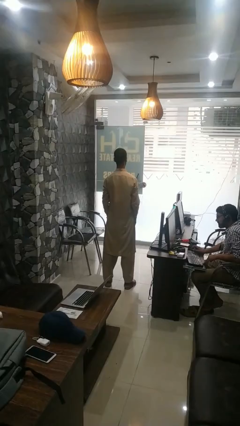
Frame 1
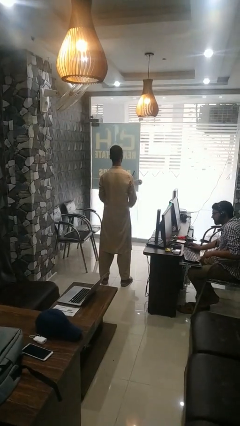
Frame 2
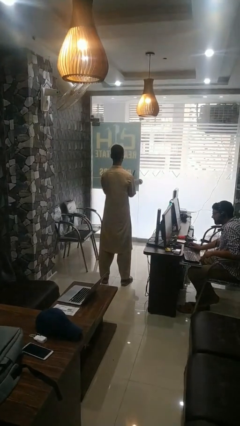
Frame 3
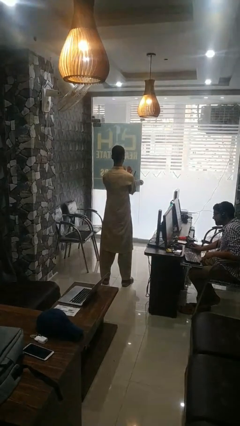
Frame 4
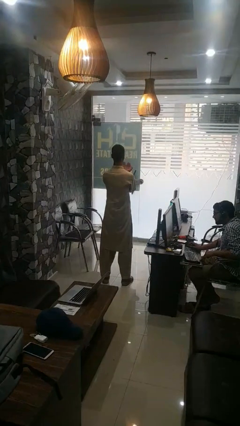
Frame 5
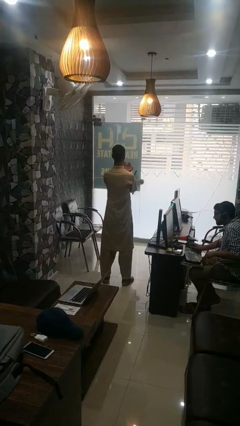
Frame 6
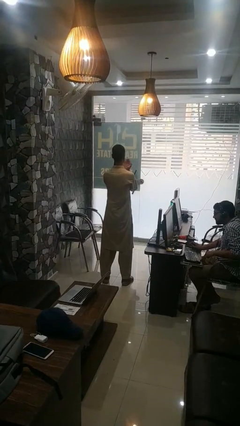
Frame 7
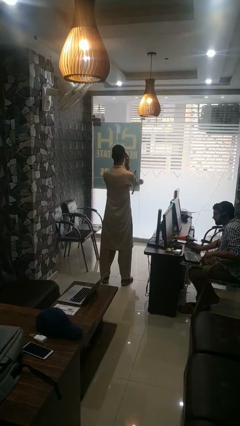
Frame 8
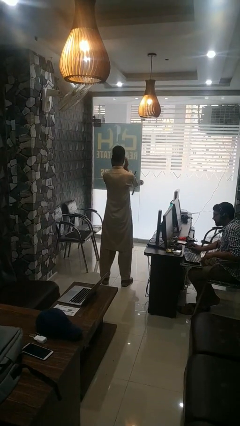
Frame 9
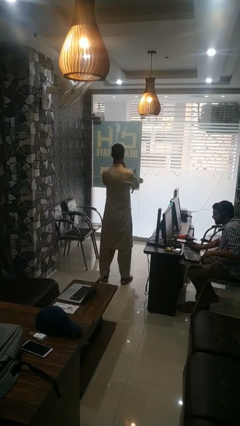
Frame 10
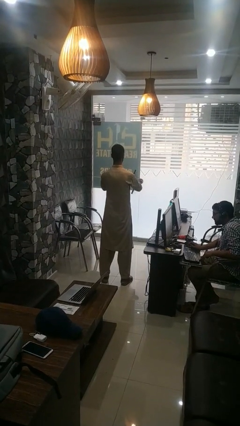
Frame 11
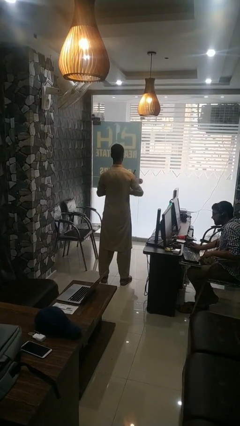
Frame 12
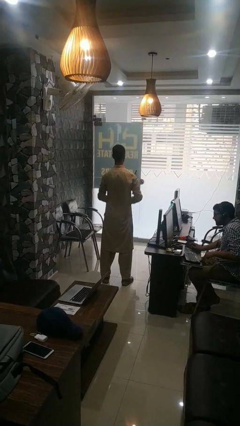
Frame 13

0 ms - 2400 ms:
person prays

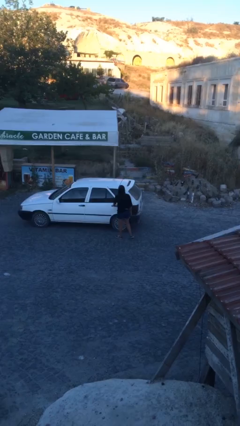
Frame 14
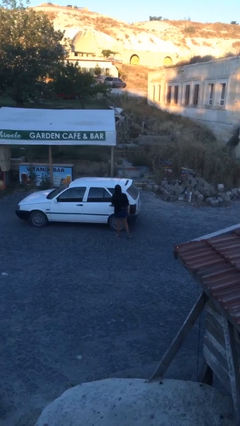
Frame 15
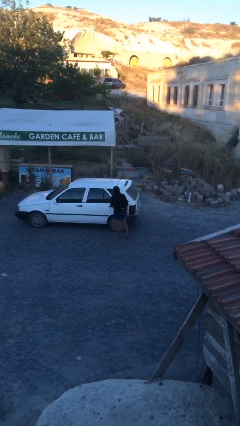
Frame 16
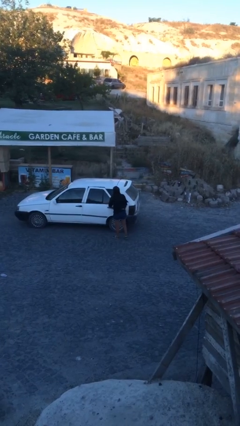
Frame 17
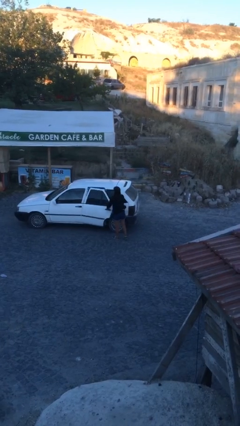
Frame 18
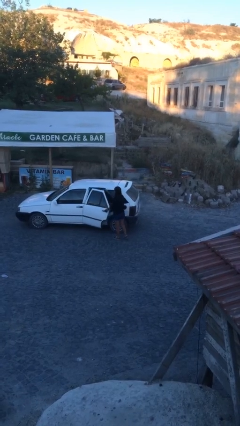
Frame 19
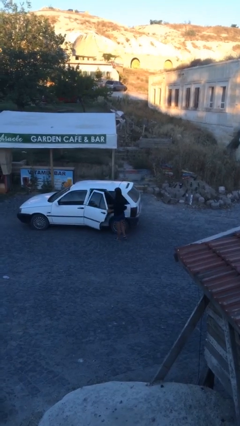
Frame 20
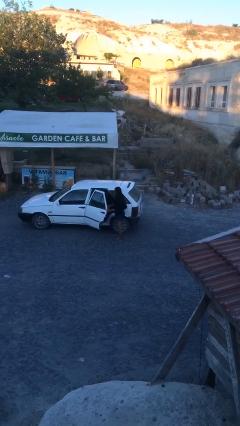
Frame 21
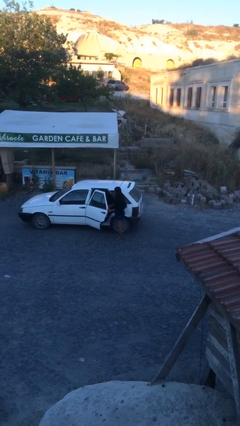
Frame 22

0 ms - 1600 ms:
person opens car door

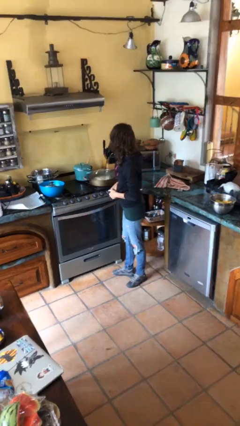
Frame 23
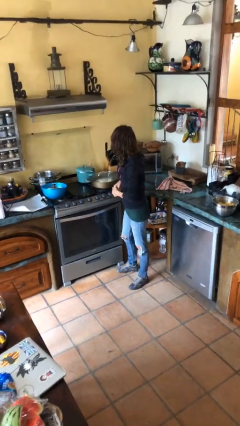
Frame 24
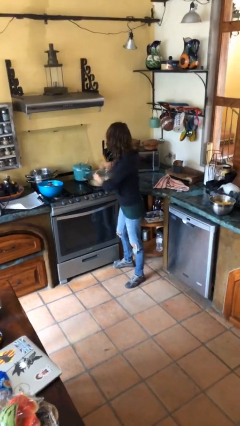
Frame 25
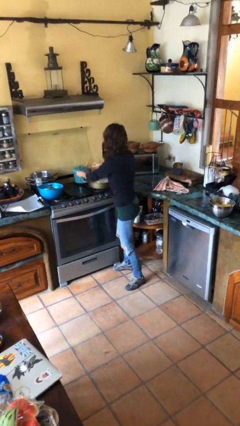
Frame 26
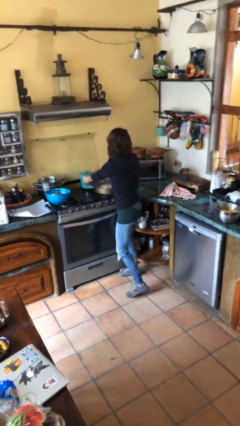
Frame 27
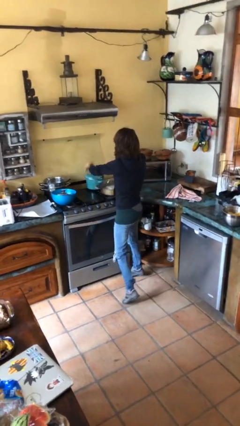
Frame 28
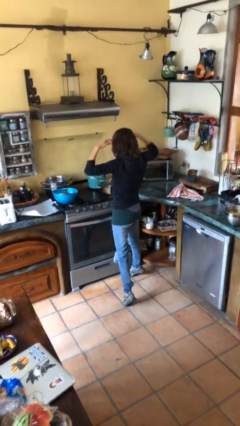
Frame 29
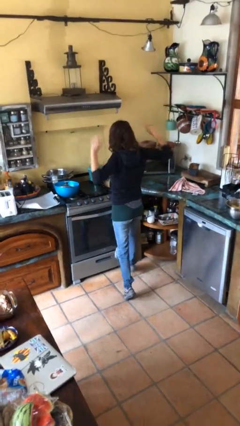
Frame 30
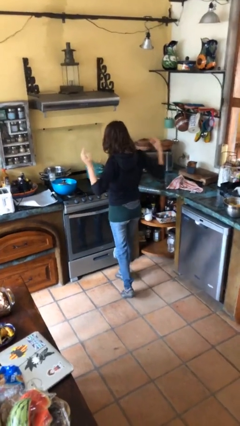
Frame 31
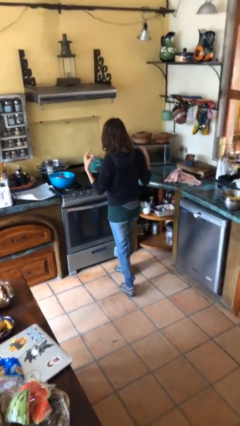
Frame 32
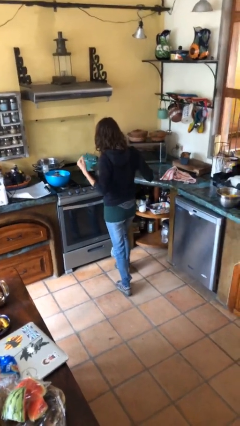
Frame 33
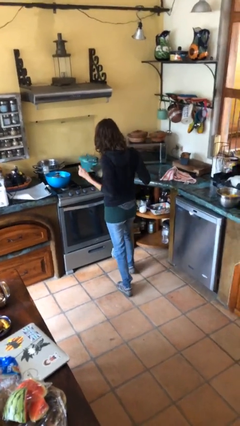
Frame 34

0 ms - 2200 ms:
person burns hand

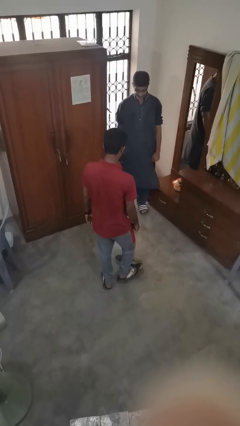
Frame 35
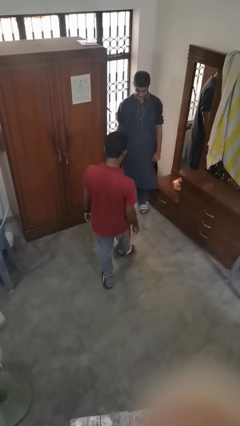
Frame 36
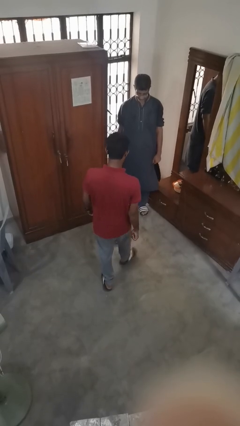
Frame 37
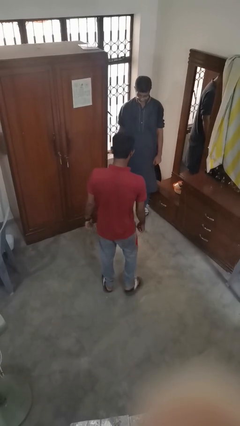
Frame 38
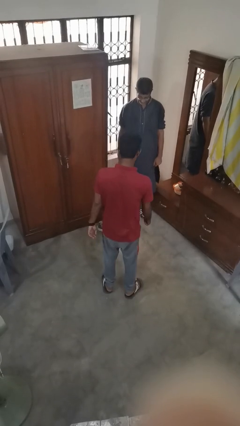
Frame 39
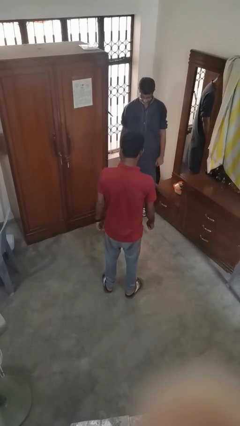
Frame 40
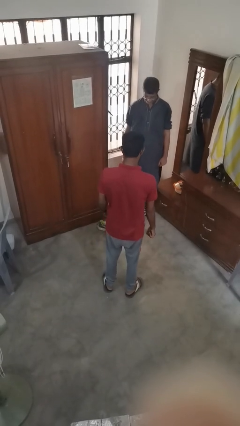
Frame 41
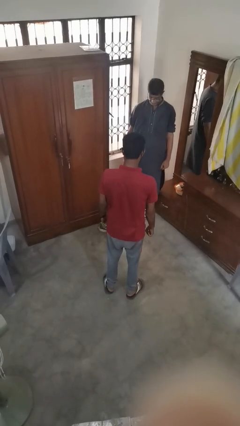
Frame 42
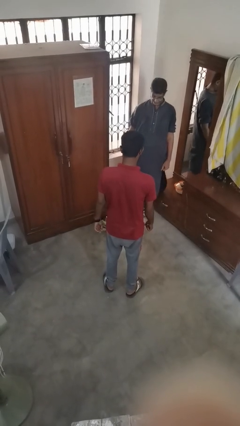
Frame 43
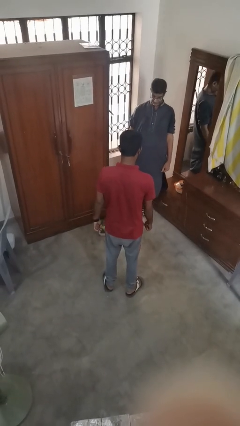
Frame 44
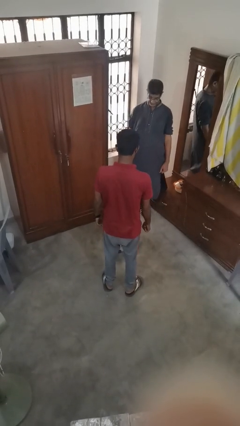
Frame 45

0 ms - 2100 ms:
person kicks object to person

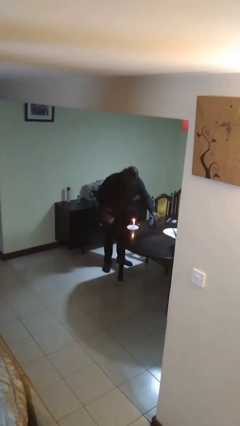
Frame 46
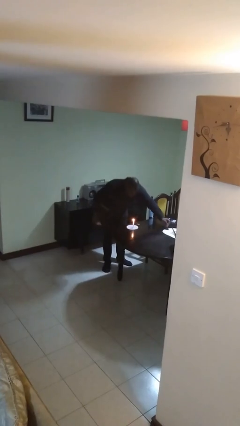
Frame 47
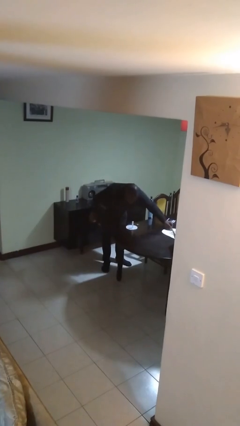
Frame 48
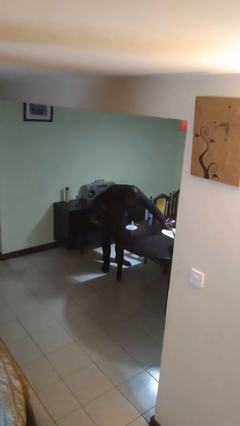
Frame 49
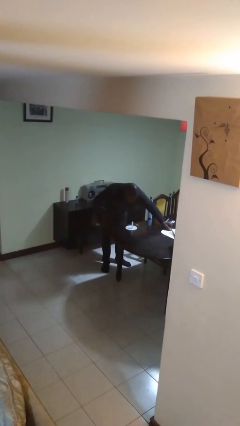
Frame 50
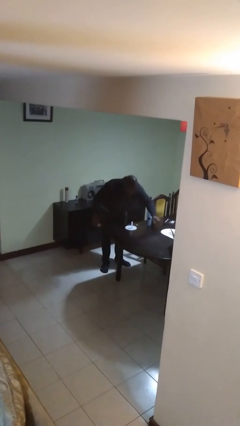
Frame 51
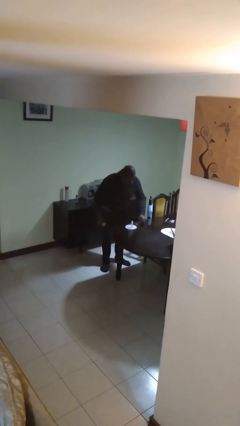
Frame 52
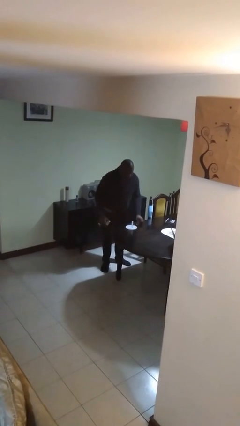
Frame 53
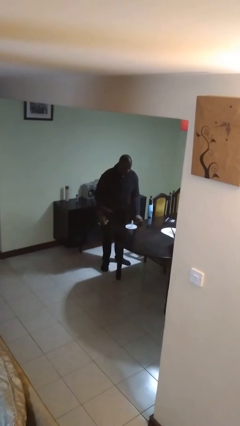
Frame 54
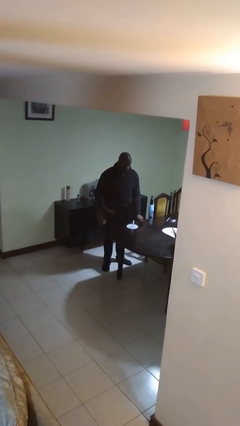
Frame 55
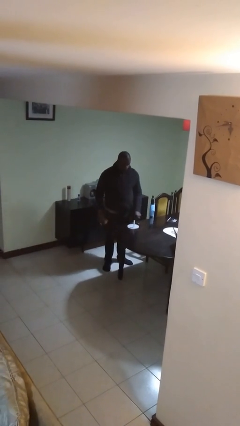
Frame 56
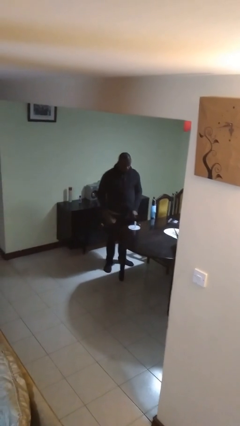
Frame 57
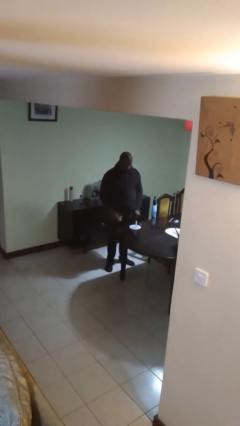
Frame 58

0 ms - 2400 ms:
person extinguishes candle

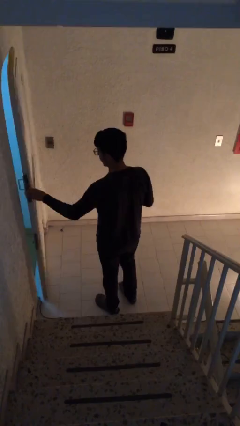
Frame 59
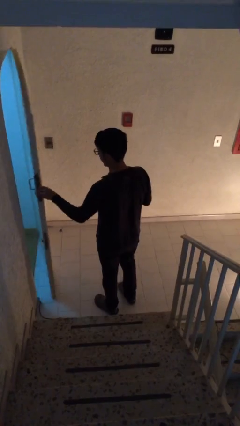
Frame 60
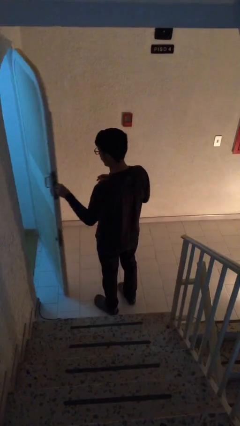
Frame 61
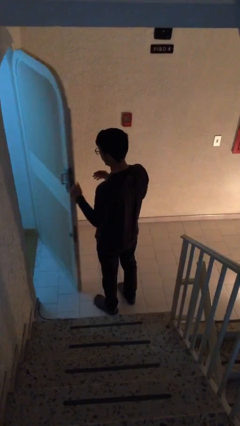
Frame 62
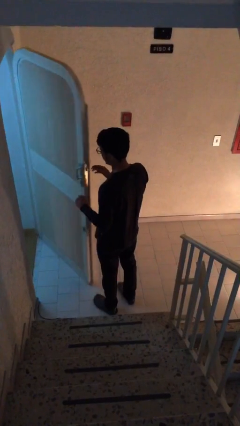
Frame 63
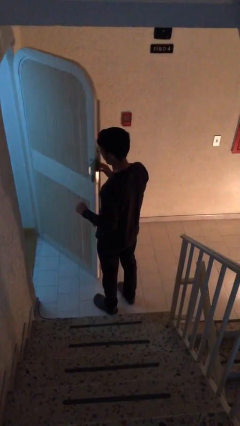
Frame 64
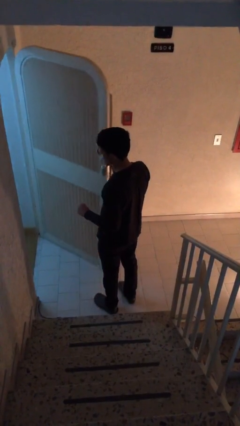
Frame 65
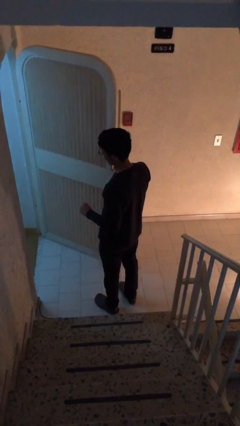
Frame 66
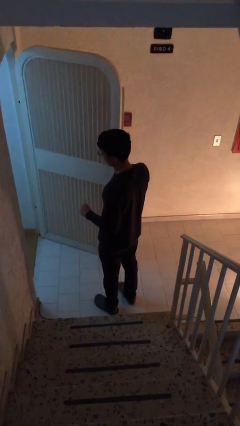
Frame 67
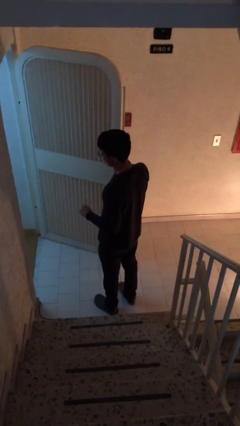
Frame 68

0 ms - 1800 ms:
person opens facility door

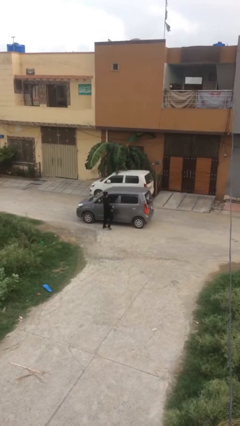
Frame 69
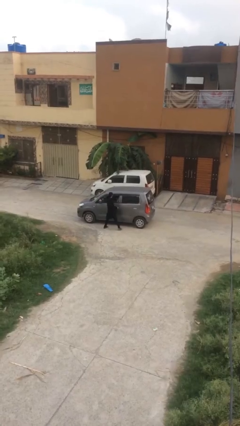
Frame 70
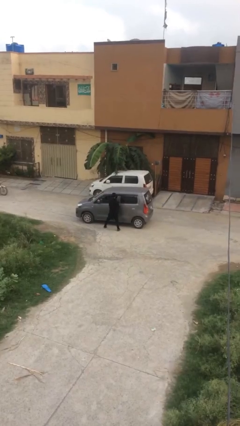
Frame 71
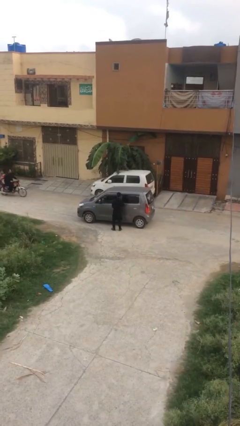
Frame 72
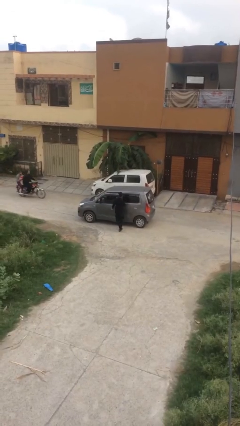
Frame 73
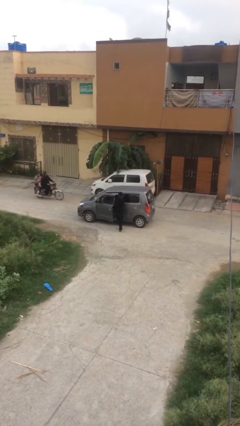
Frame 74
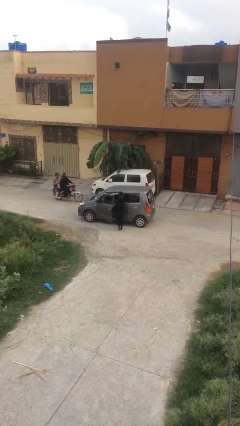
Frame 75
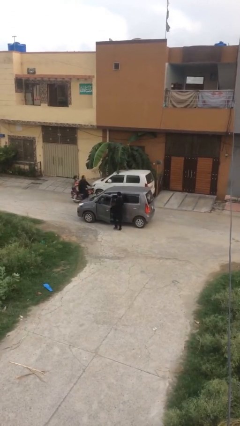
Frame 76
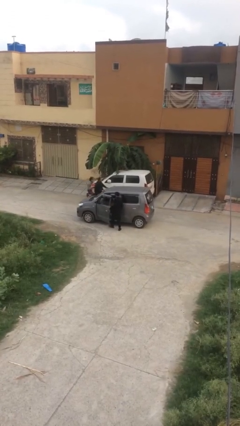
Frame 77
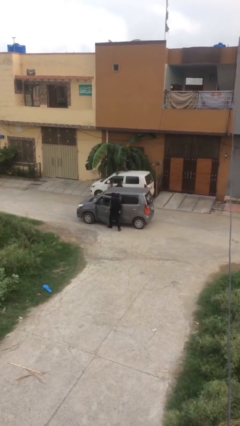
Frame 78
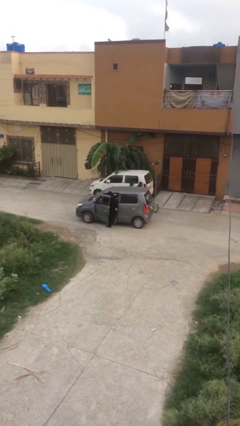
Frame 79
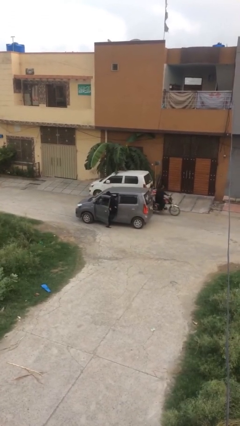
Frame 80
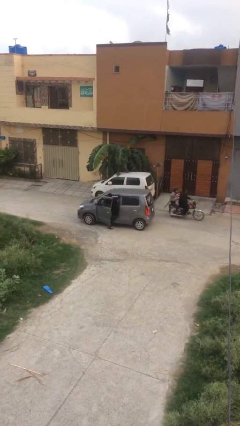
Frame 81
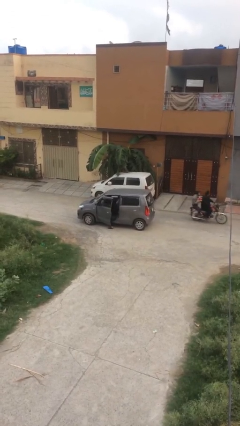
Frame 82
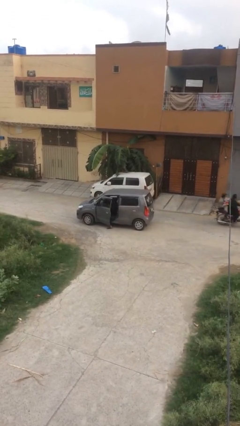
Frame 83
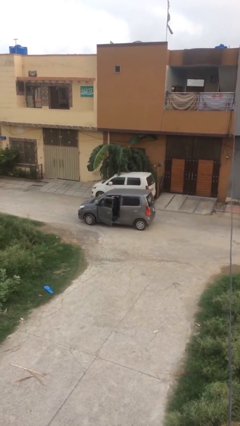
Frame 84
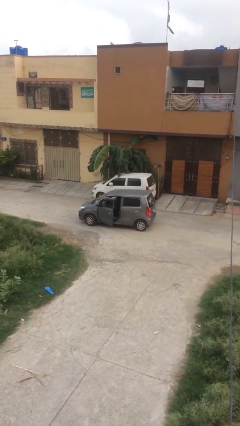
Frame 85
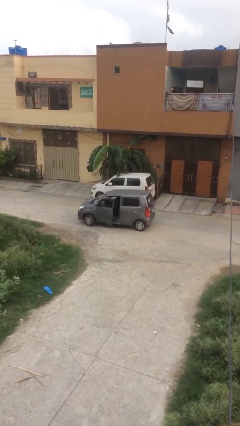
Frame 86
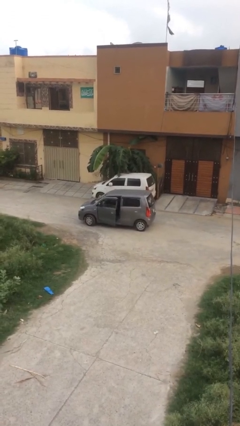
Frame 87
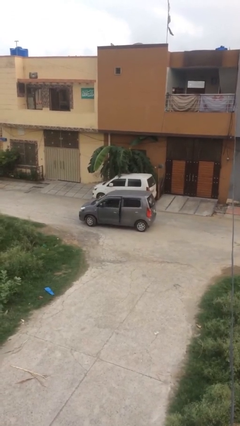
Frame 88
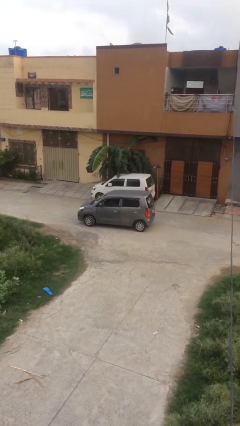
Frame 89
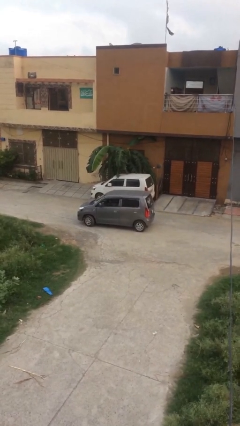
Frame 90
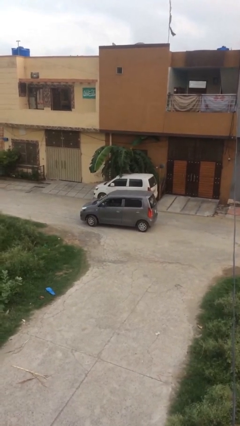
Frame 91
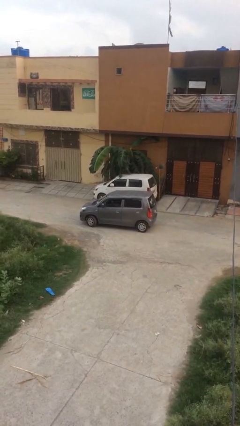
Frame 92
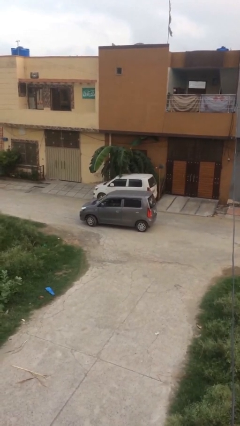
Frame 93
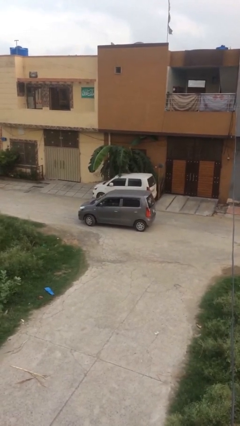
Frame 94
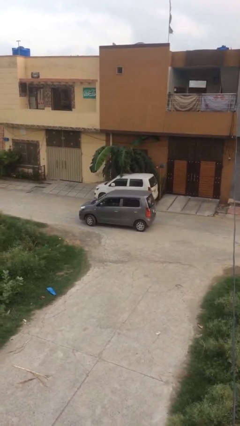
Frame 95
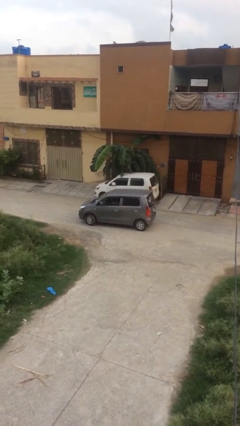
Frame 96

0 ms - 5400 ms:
car picks up person
